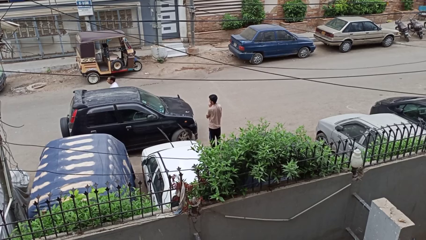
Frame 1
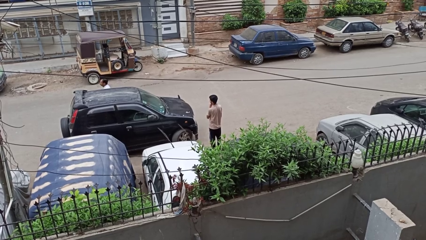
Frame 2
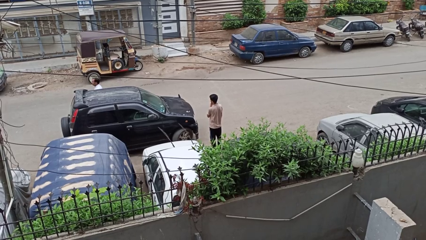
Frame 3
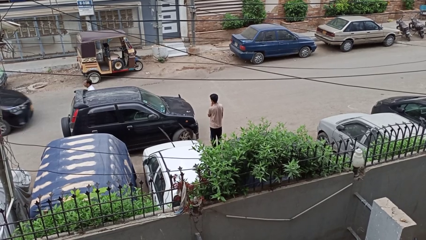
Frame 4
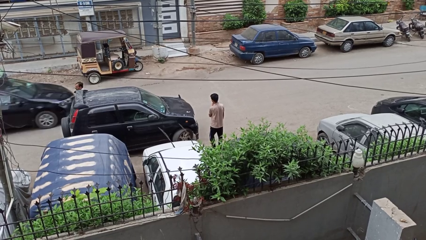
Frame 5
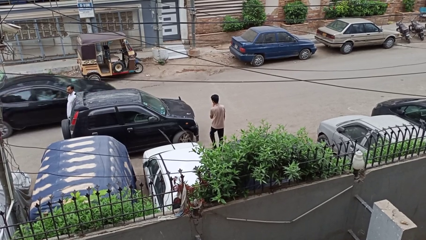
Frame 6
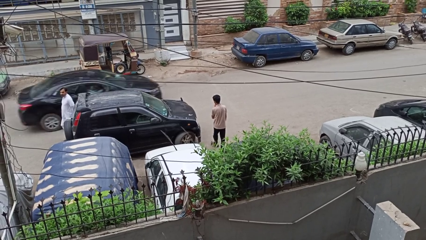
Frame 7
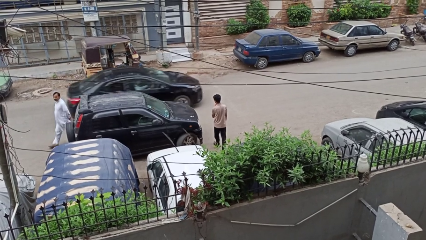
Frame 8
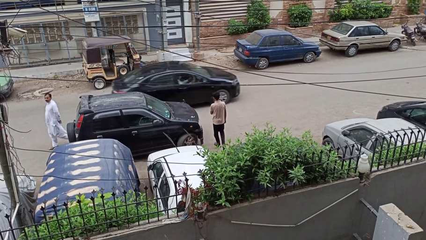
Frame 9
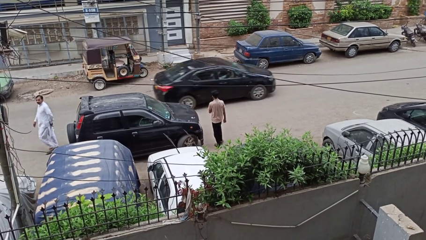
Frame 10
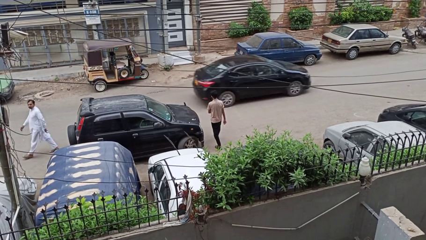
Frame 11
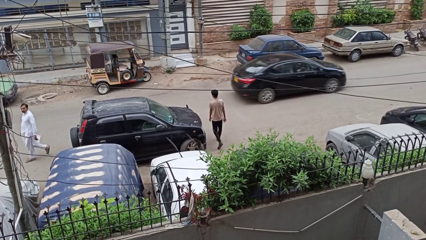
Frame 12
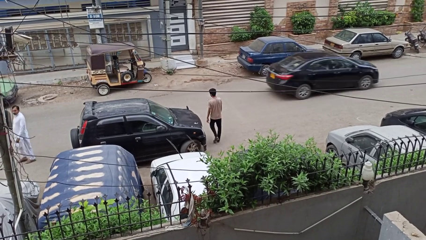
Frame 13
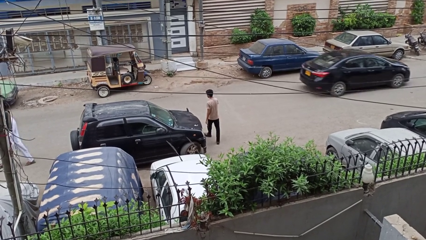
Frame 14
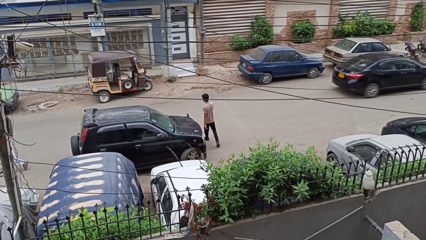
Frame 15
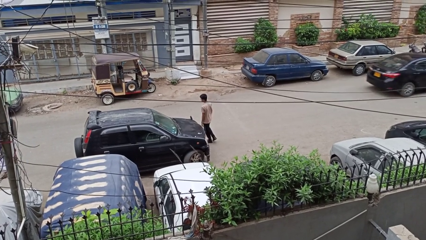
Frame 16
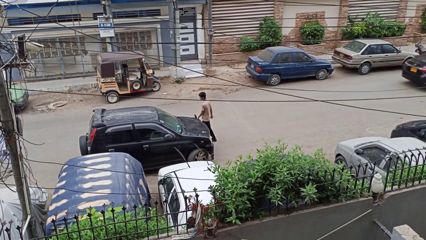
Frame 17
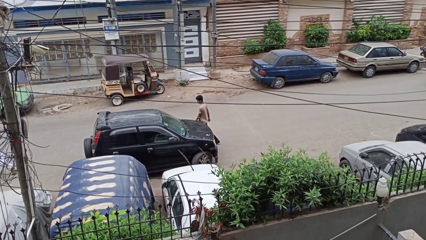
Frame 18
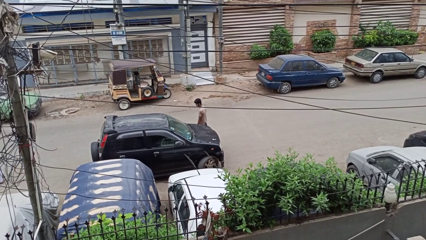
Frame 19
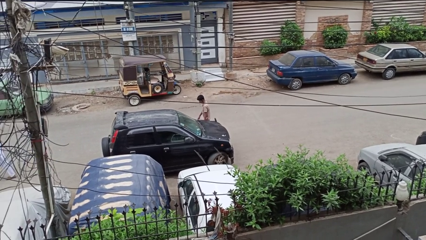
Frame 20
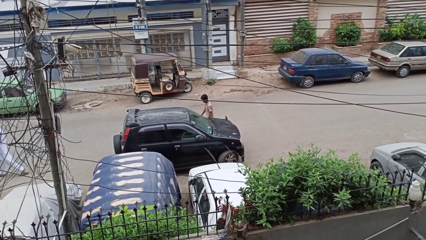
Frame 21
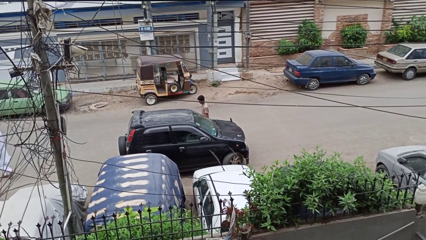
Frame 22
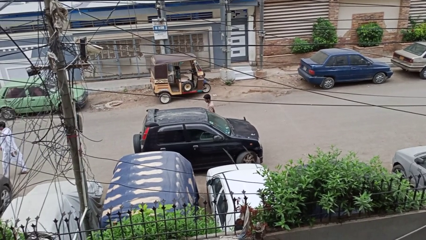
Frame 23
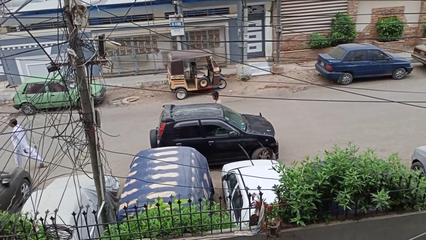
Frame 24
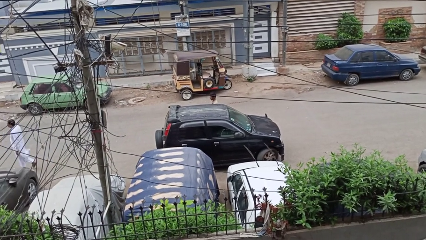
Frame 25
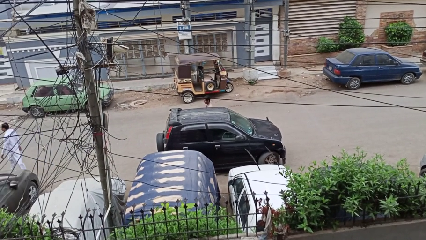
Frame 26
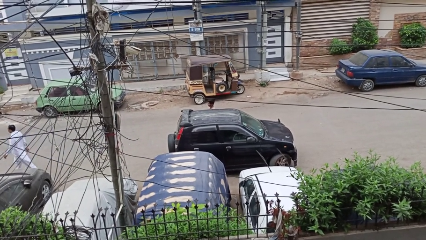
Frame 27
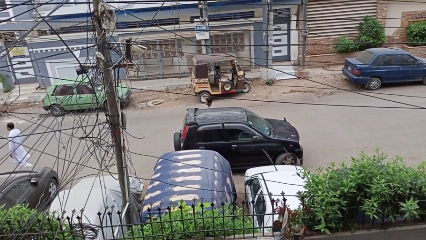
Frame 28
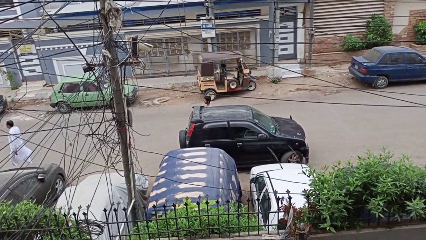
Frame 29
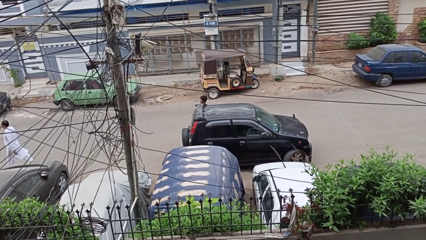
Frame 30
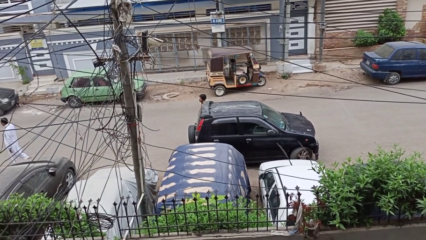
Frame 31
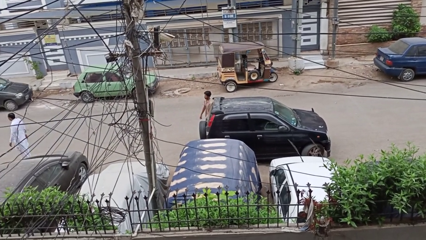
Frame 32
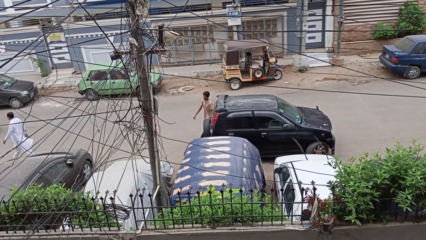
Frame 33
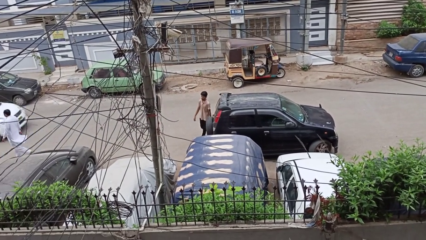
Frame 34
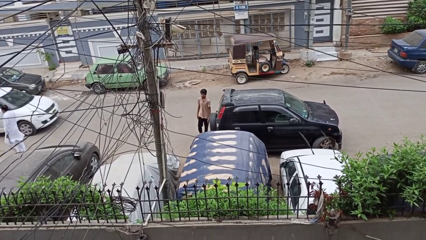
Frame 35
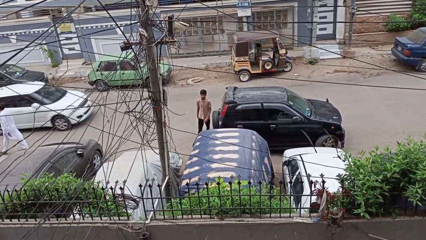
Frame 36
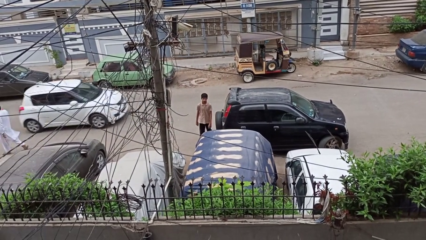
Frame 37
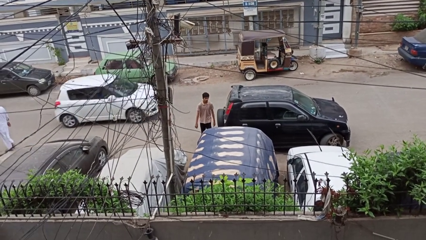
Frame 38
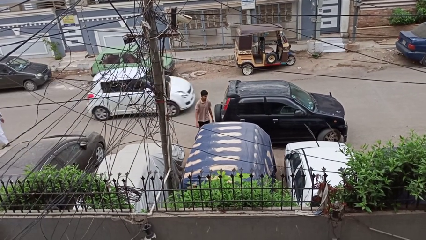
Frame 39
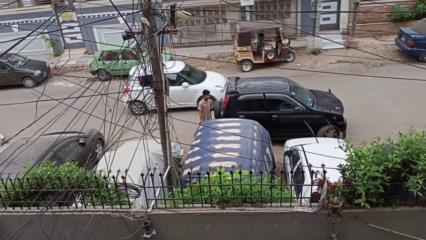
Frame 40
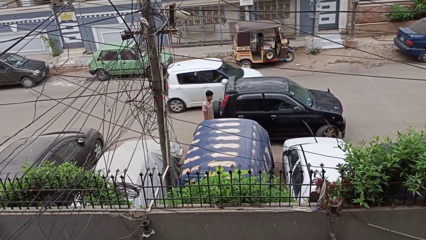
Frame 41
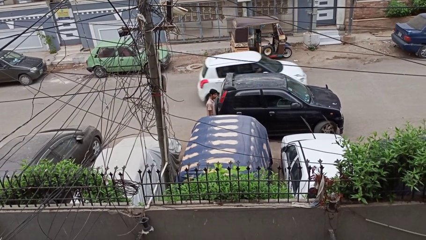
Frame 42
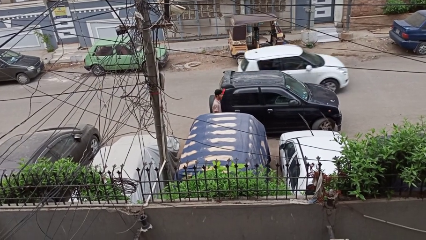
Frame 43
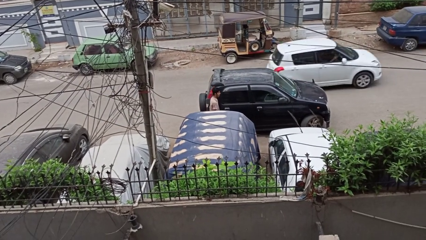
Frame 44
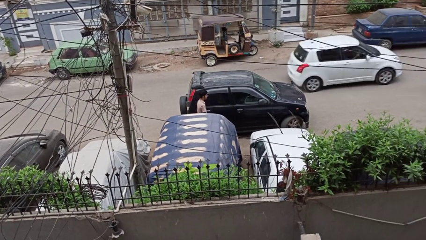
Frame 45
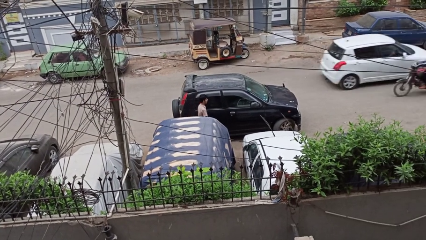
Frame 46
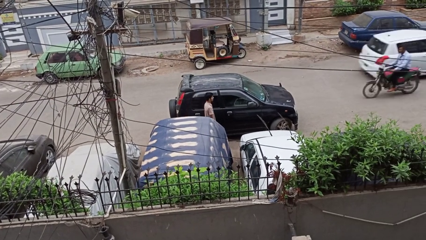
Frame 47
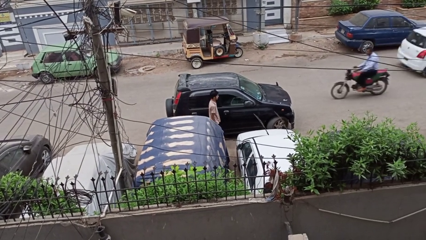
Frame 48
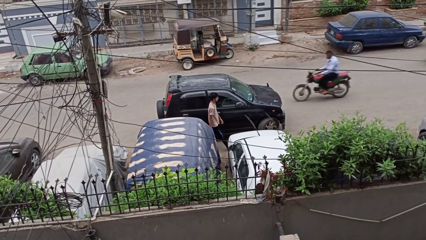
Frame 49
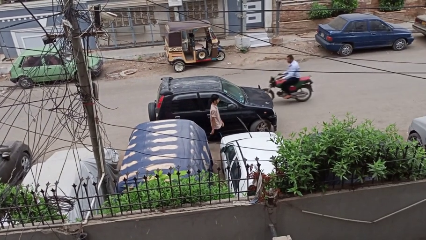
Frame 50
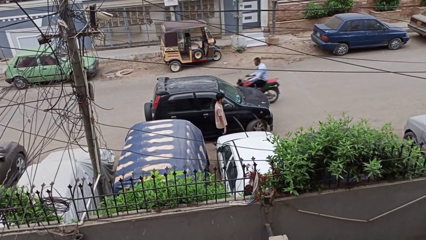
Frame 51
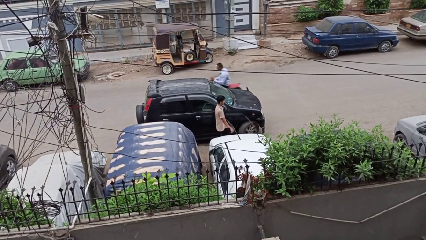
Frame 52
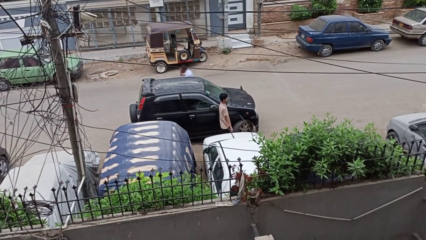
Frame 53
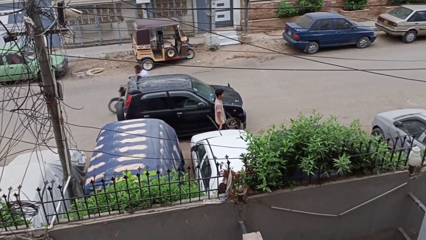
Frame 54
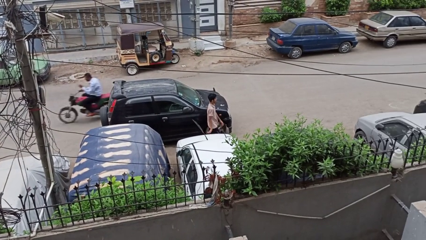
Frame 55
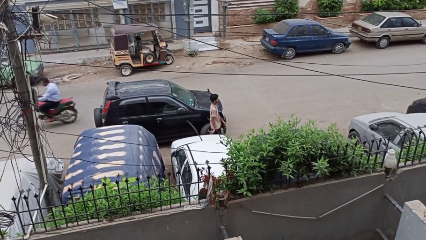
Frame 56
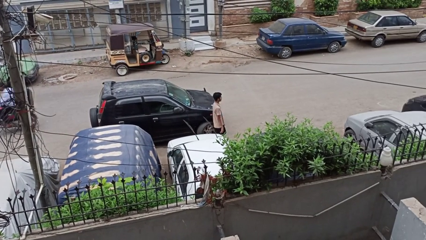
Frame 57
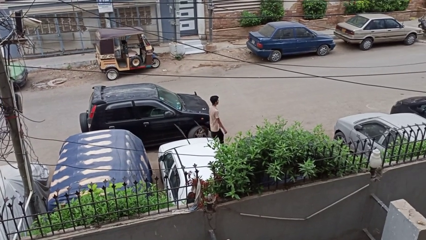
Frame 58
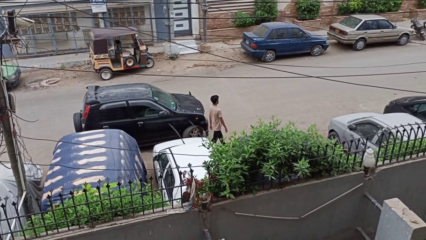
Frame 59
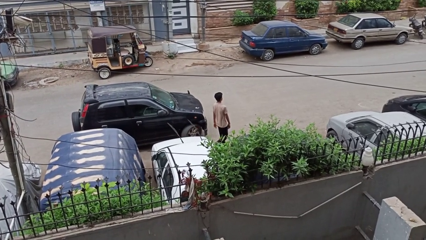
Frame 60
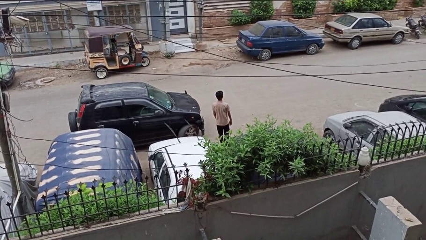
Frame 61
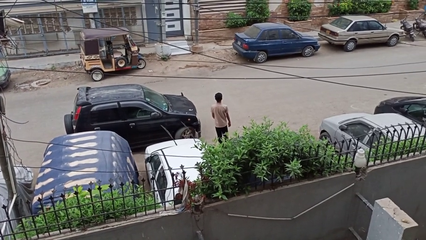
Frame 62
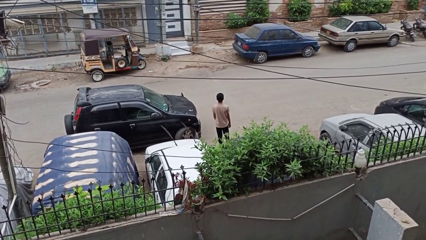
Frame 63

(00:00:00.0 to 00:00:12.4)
person walks around car

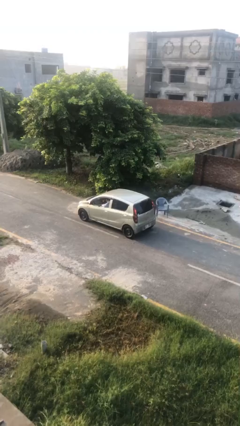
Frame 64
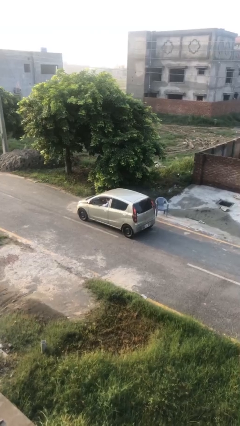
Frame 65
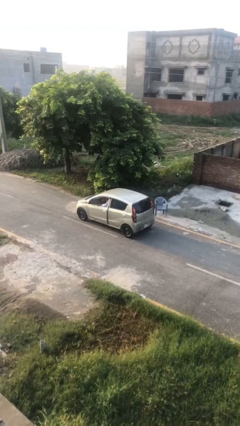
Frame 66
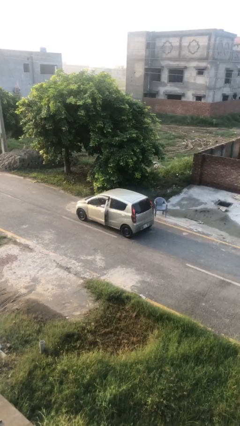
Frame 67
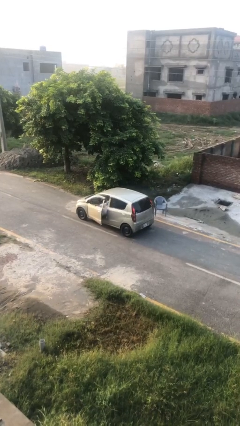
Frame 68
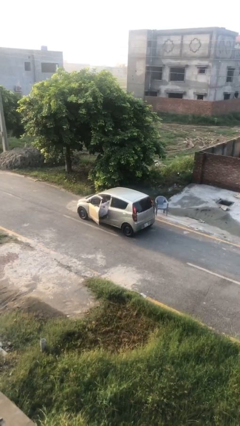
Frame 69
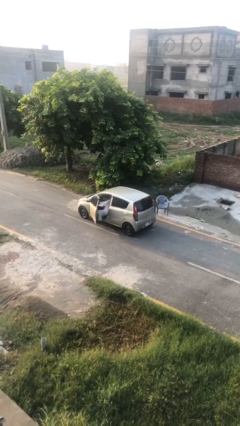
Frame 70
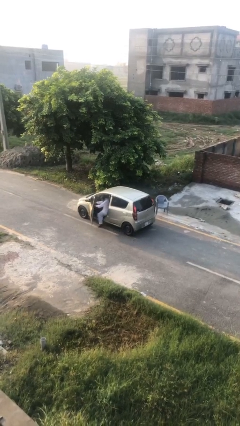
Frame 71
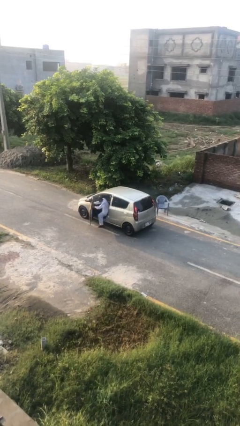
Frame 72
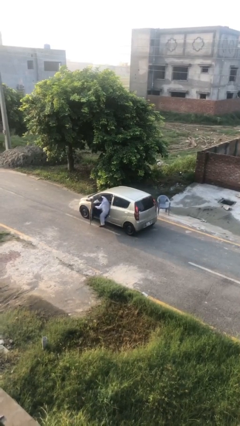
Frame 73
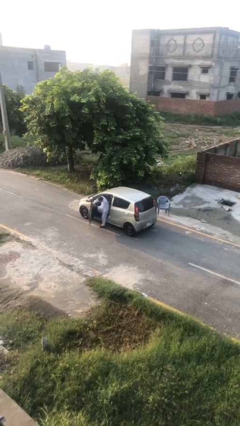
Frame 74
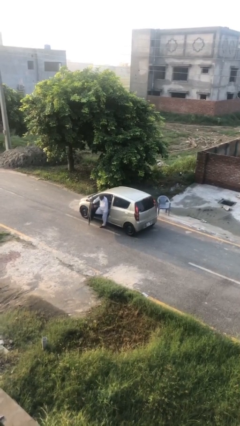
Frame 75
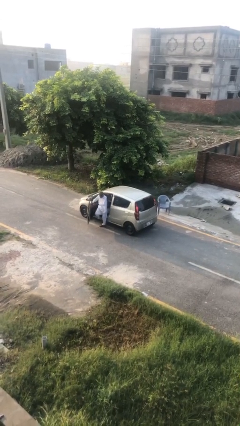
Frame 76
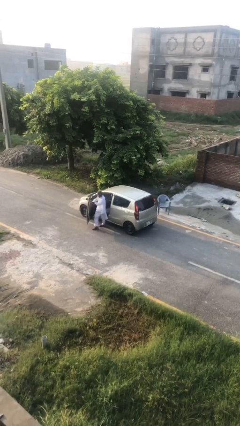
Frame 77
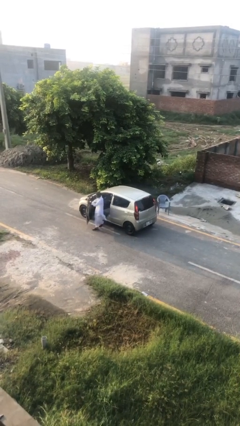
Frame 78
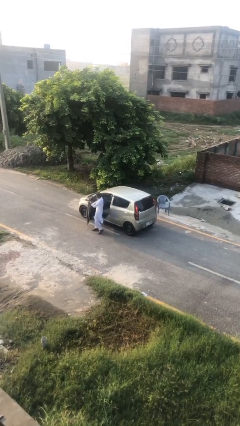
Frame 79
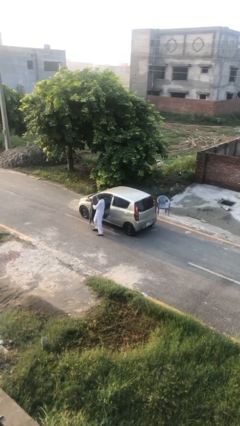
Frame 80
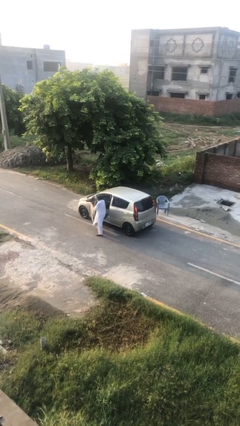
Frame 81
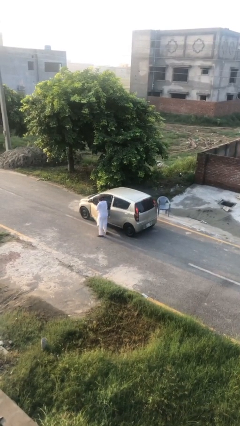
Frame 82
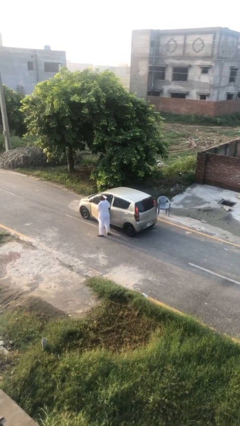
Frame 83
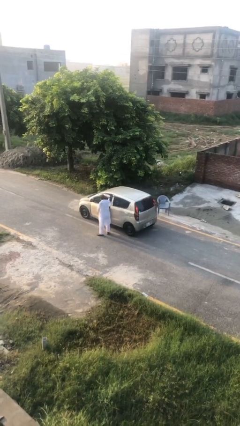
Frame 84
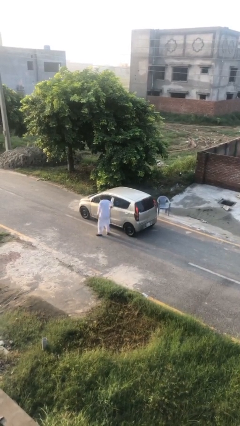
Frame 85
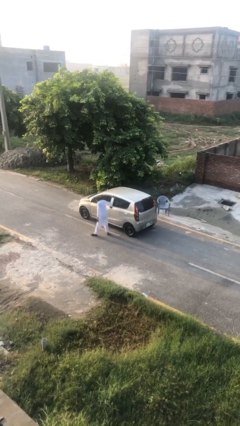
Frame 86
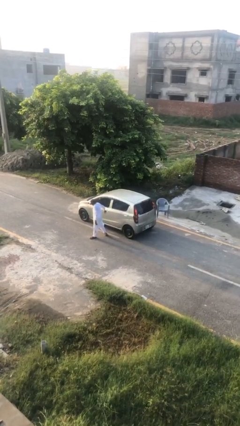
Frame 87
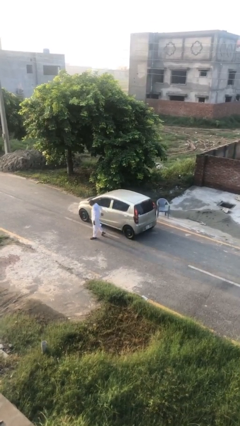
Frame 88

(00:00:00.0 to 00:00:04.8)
car drops off person

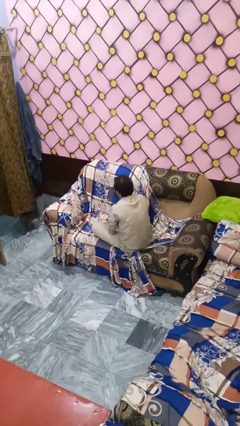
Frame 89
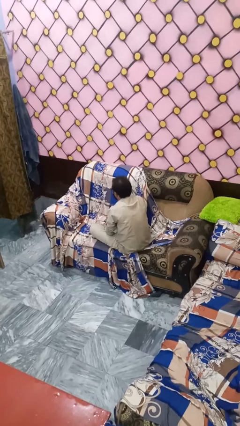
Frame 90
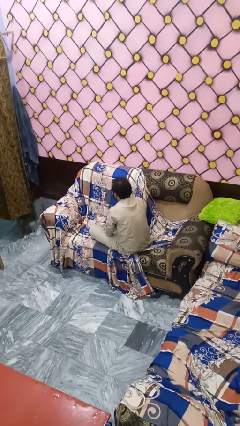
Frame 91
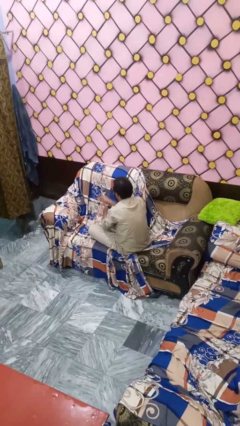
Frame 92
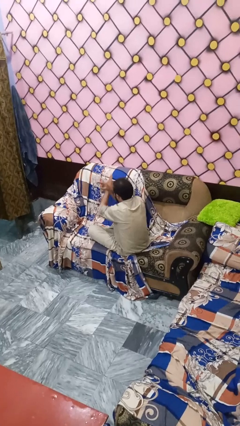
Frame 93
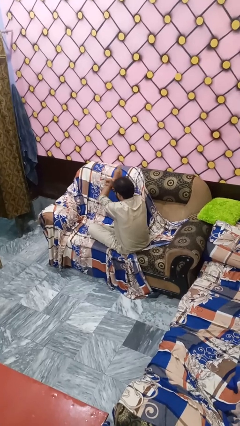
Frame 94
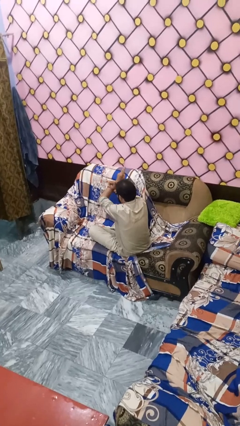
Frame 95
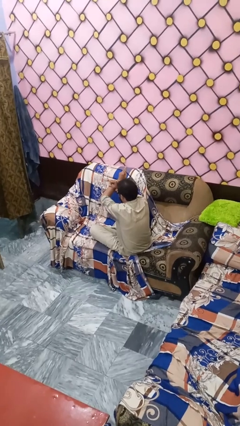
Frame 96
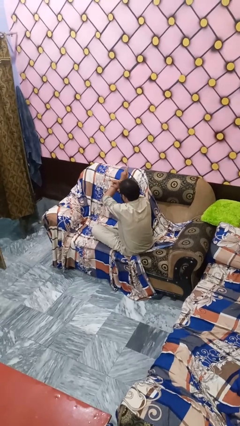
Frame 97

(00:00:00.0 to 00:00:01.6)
person gestures cut
